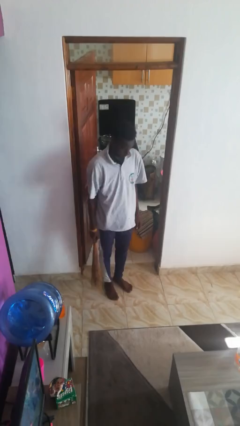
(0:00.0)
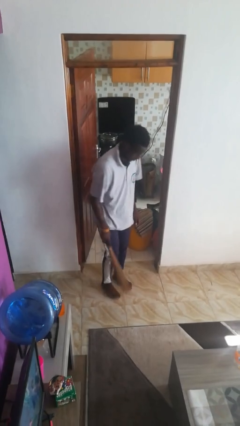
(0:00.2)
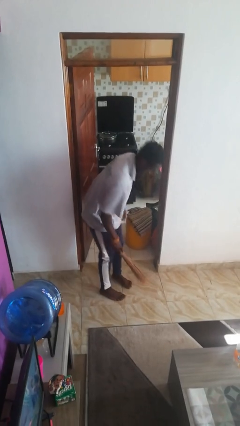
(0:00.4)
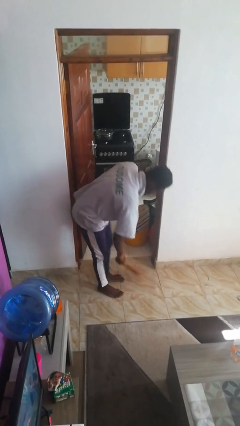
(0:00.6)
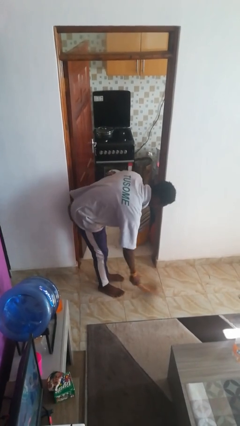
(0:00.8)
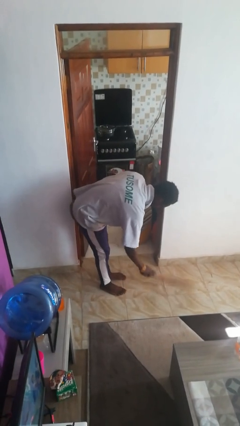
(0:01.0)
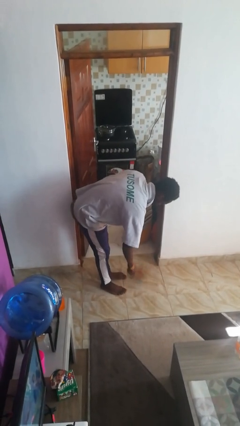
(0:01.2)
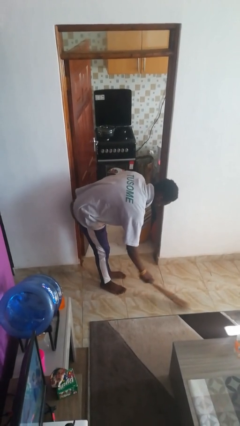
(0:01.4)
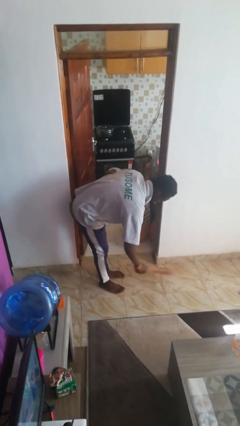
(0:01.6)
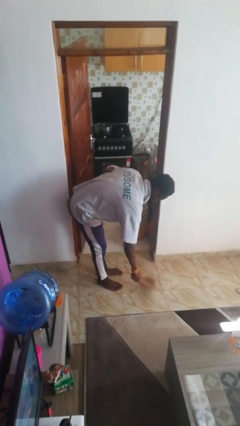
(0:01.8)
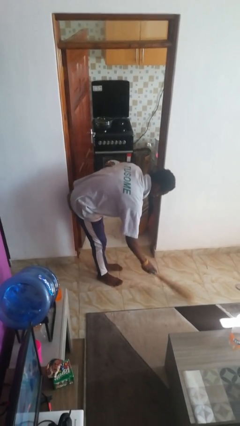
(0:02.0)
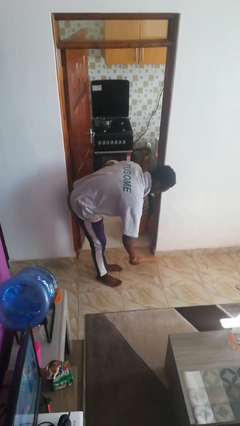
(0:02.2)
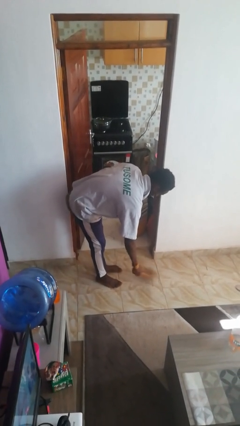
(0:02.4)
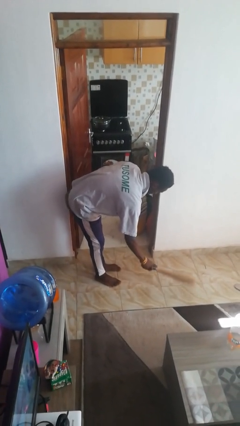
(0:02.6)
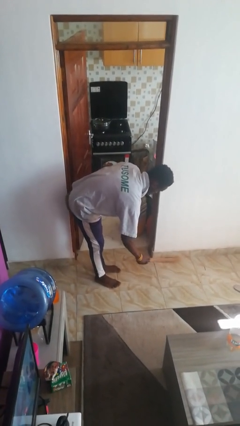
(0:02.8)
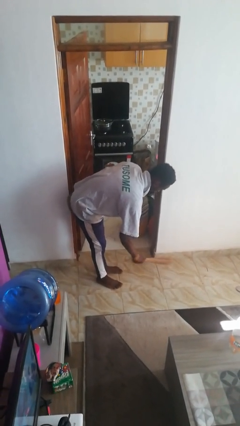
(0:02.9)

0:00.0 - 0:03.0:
person sweeps floor

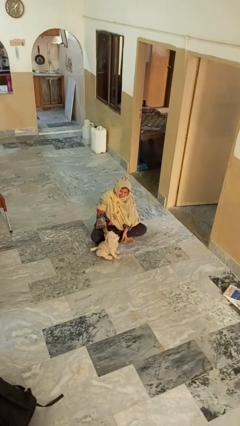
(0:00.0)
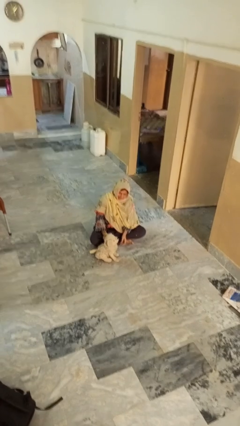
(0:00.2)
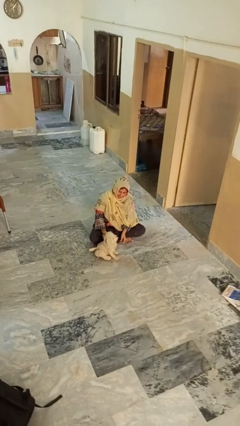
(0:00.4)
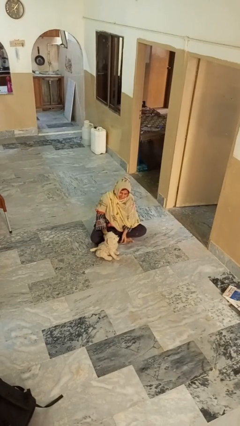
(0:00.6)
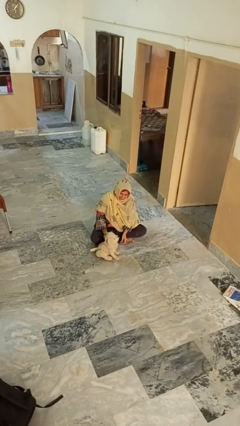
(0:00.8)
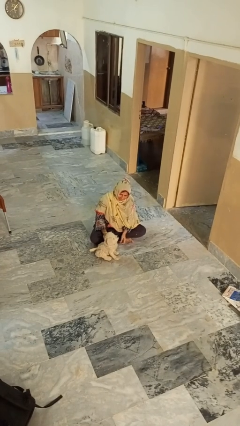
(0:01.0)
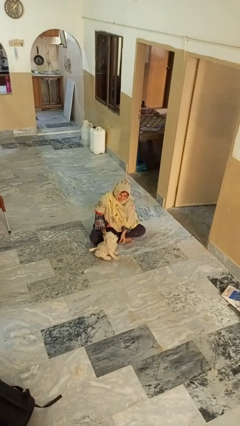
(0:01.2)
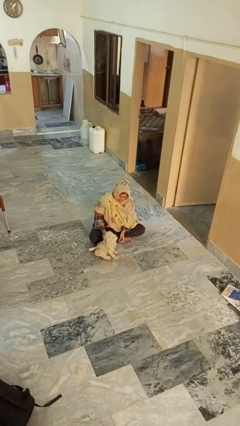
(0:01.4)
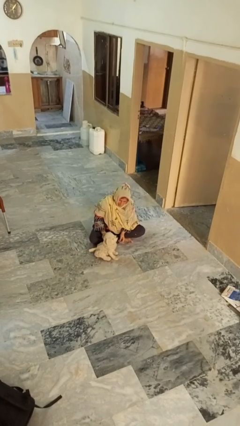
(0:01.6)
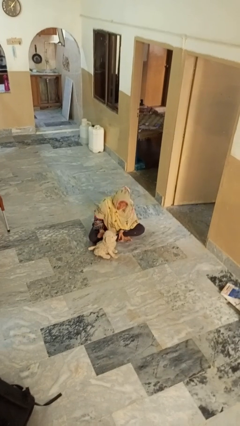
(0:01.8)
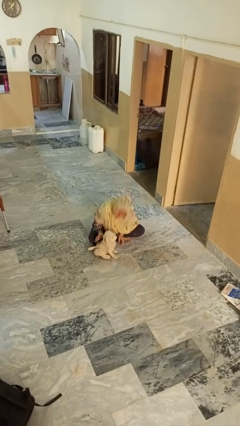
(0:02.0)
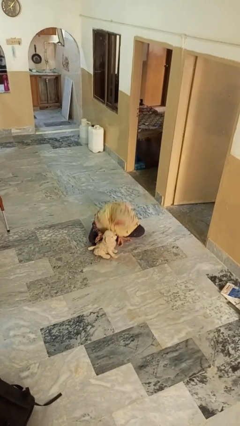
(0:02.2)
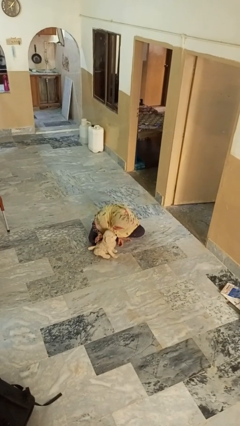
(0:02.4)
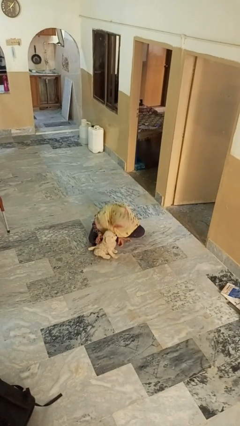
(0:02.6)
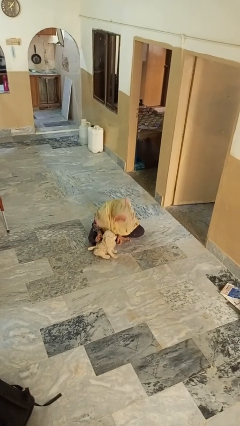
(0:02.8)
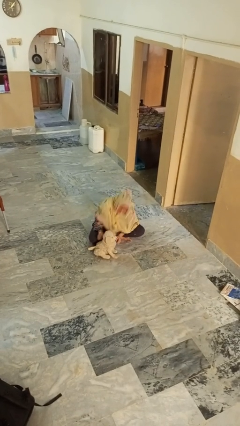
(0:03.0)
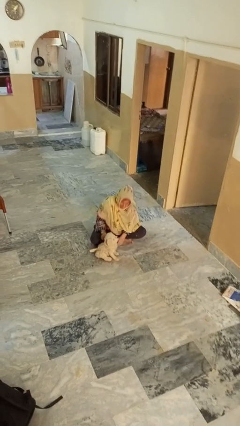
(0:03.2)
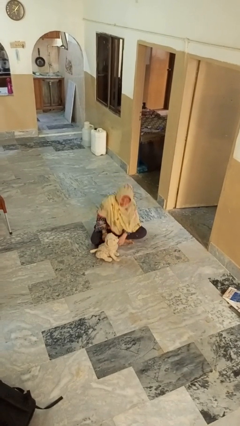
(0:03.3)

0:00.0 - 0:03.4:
person pets dog

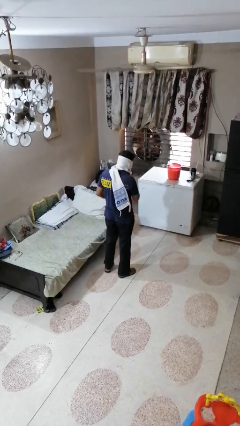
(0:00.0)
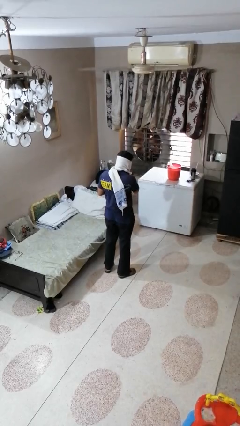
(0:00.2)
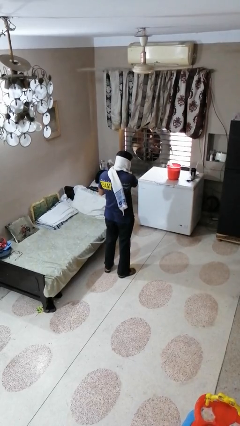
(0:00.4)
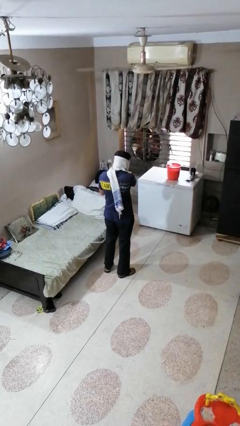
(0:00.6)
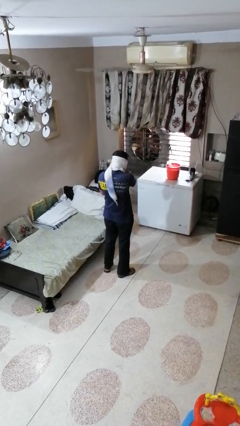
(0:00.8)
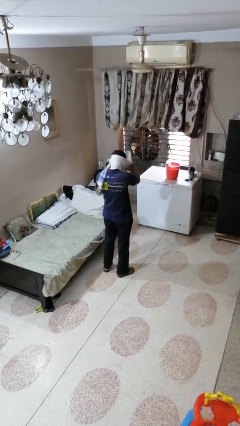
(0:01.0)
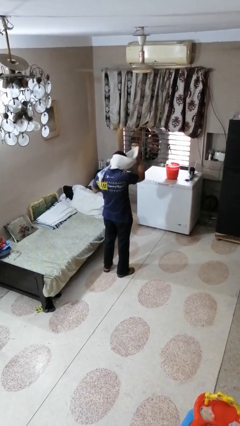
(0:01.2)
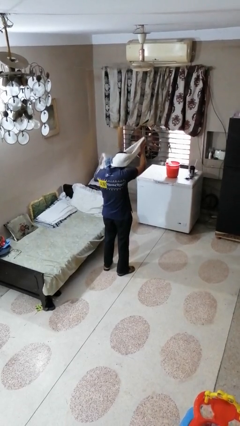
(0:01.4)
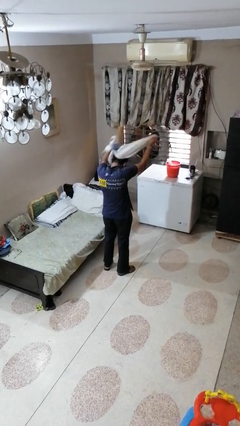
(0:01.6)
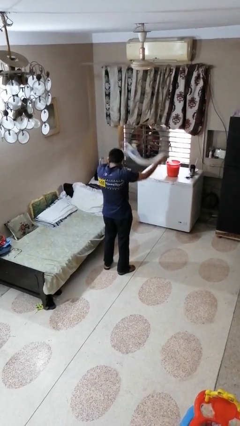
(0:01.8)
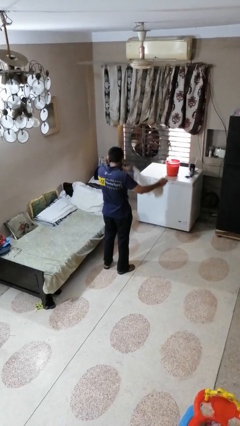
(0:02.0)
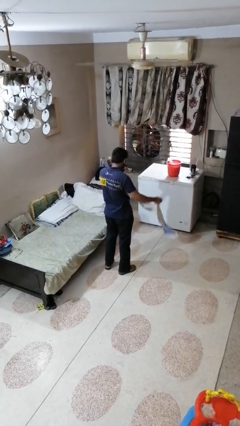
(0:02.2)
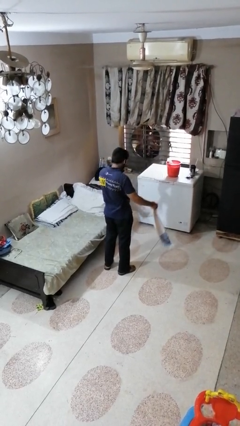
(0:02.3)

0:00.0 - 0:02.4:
person takes off scarf

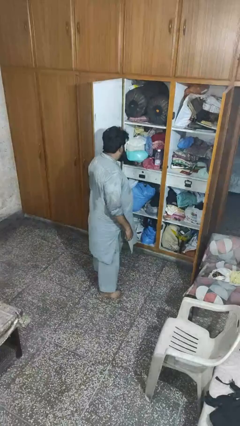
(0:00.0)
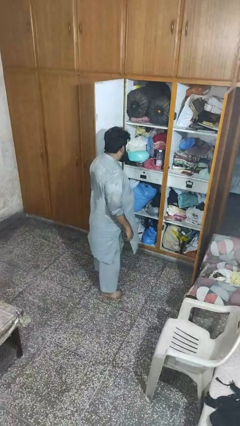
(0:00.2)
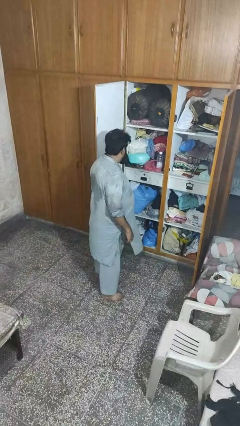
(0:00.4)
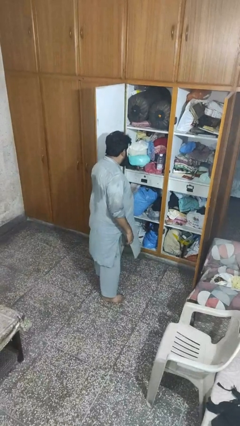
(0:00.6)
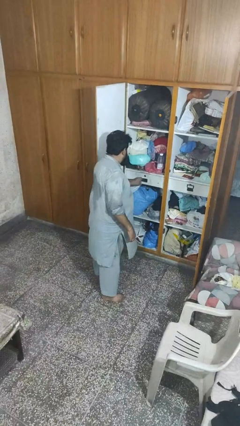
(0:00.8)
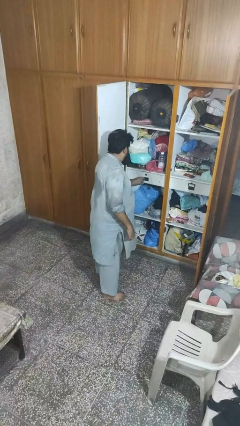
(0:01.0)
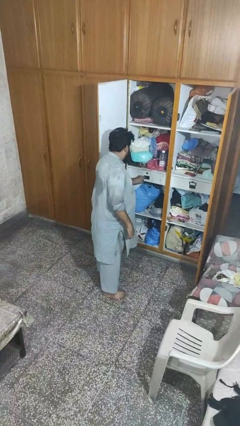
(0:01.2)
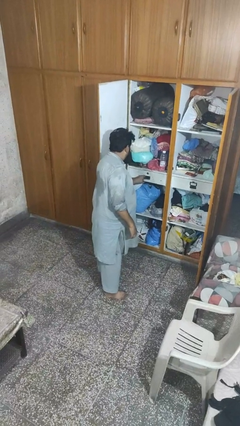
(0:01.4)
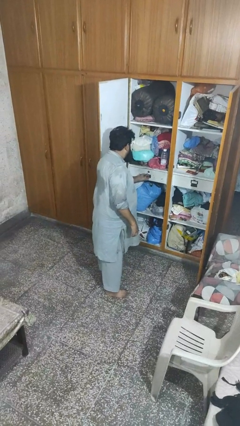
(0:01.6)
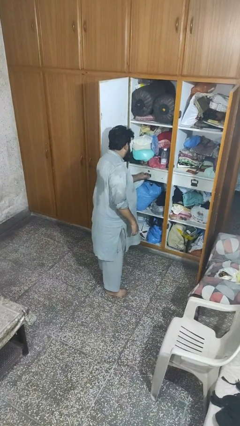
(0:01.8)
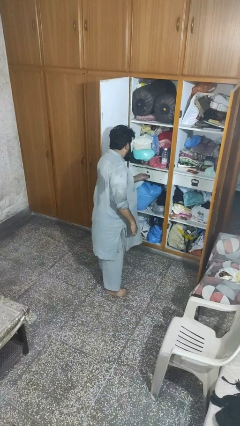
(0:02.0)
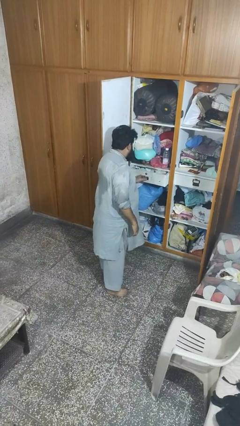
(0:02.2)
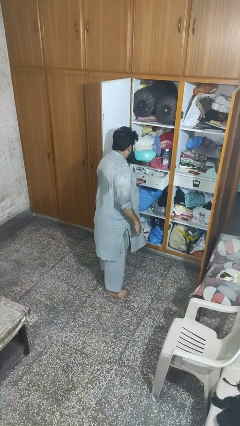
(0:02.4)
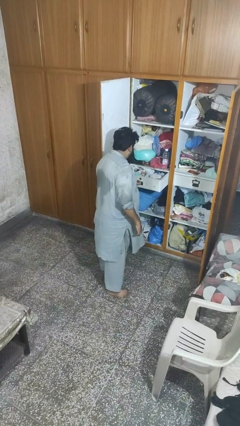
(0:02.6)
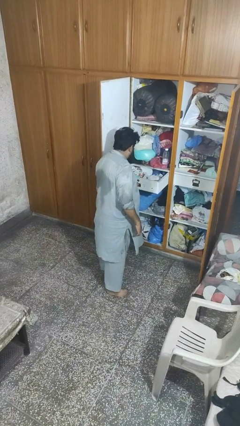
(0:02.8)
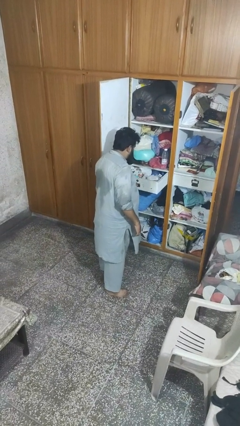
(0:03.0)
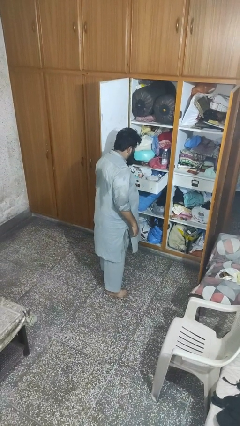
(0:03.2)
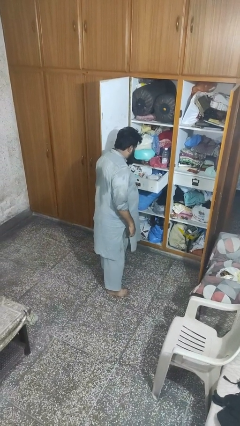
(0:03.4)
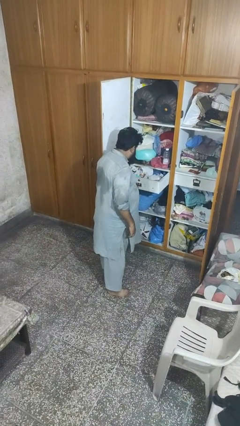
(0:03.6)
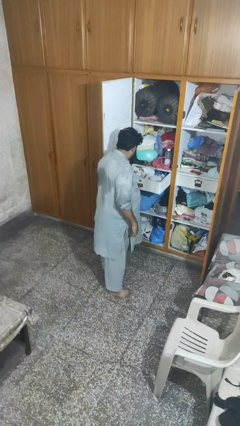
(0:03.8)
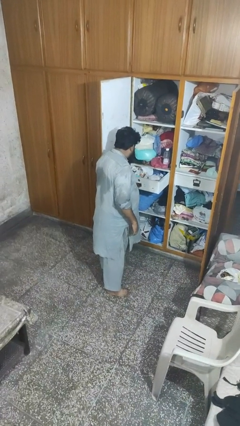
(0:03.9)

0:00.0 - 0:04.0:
person opens dresser drawer

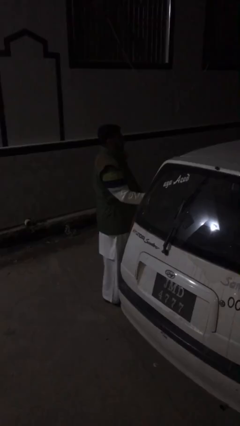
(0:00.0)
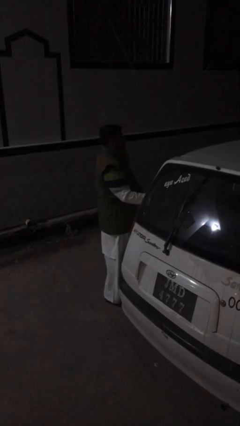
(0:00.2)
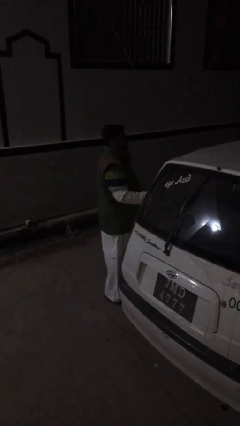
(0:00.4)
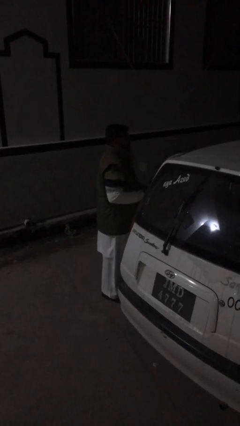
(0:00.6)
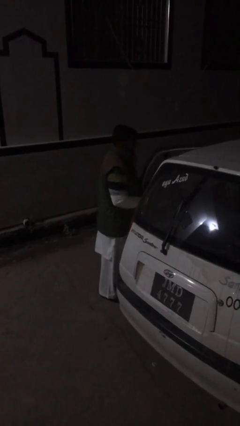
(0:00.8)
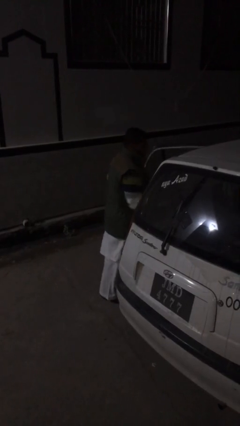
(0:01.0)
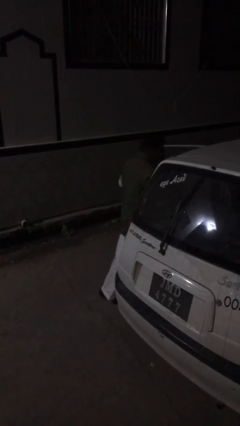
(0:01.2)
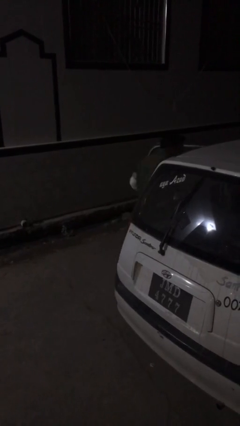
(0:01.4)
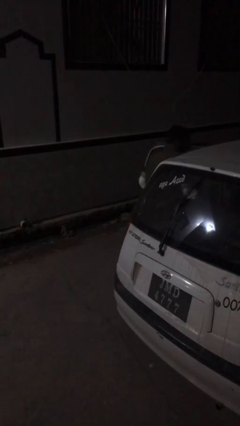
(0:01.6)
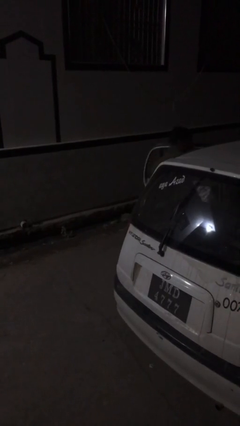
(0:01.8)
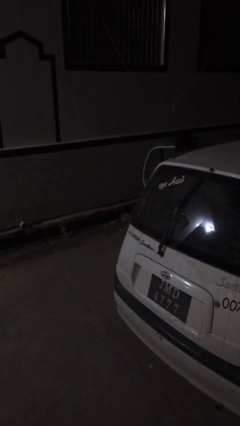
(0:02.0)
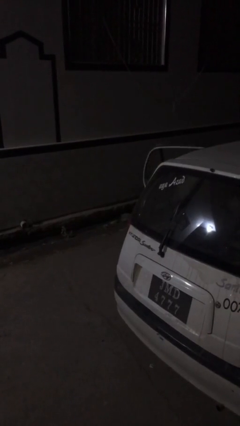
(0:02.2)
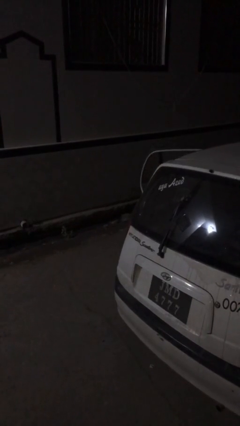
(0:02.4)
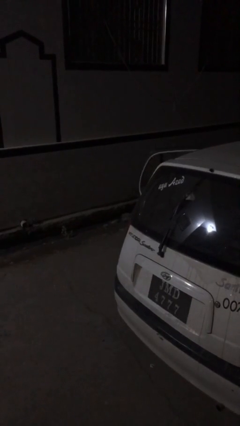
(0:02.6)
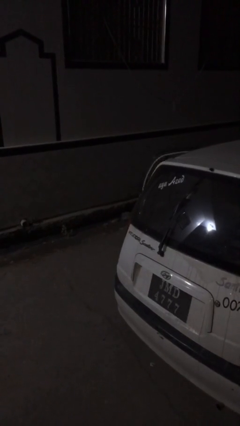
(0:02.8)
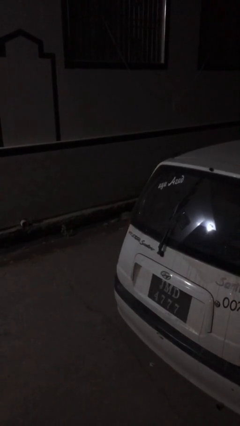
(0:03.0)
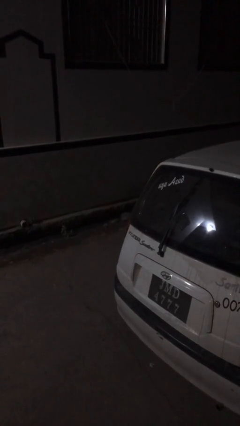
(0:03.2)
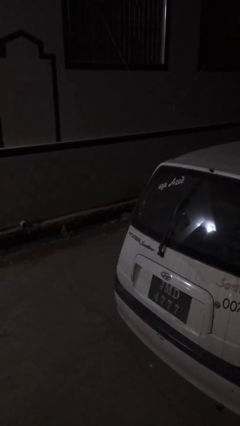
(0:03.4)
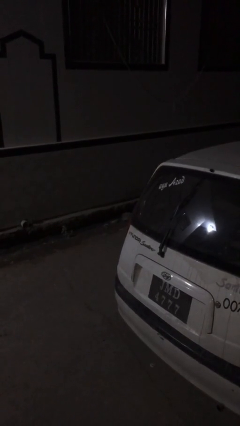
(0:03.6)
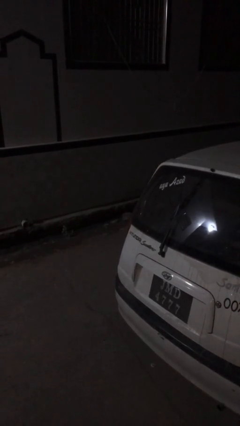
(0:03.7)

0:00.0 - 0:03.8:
person enters car

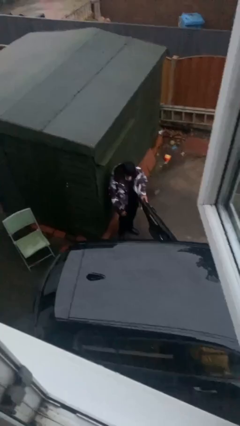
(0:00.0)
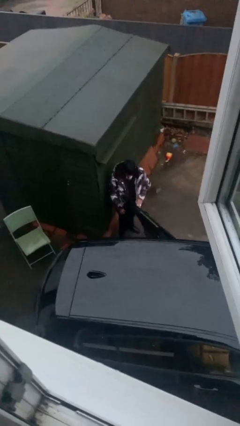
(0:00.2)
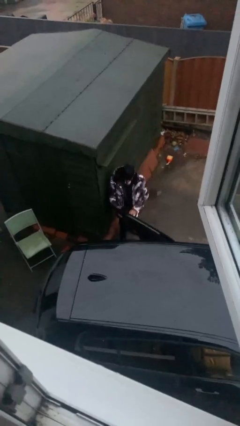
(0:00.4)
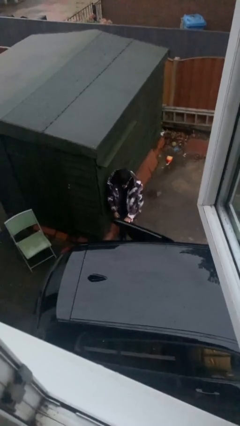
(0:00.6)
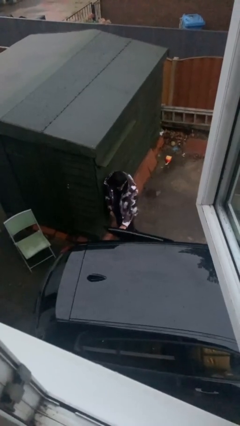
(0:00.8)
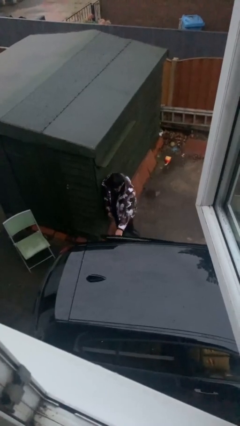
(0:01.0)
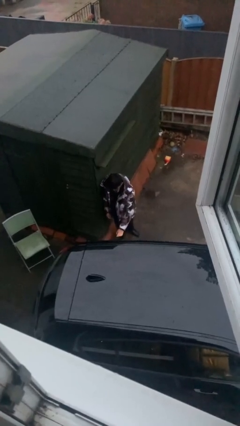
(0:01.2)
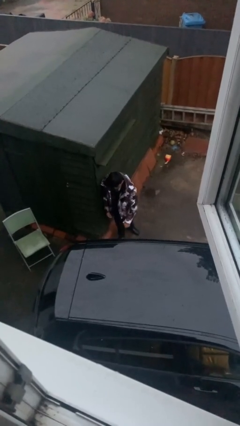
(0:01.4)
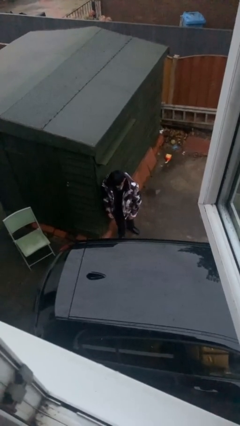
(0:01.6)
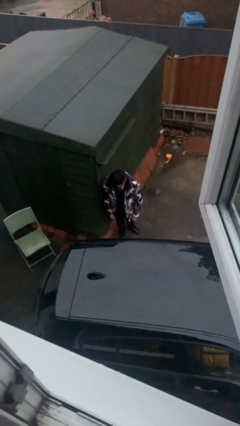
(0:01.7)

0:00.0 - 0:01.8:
person closes car door
